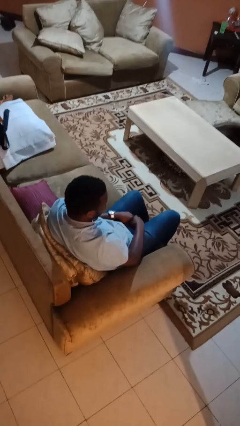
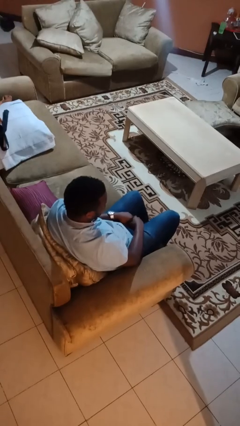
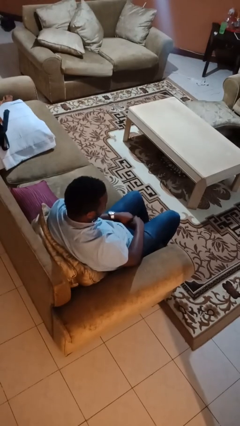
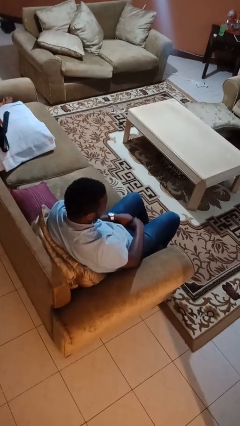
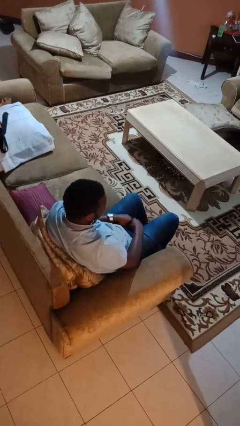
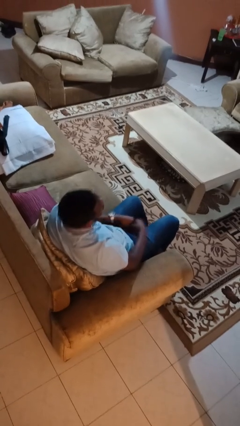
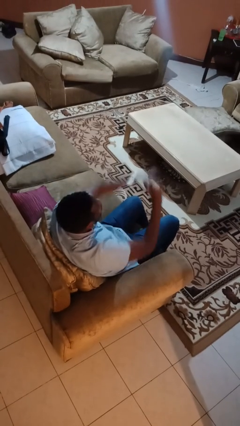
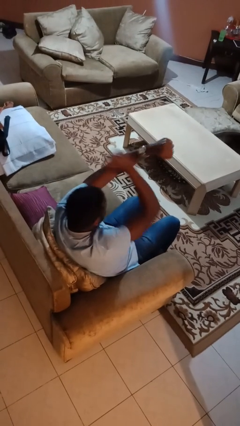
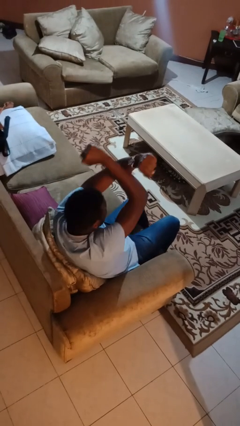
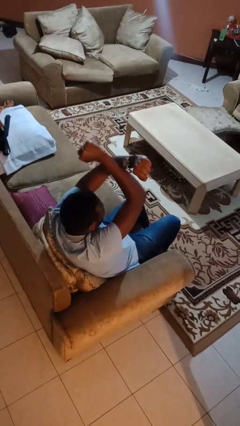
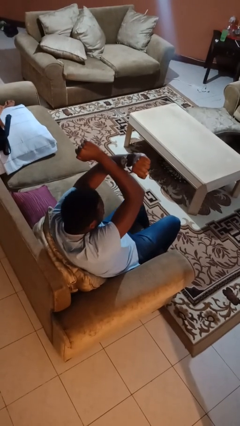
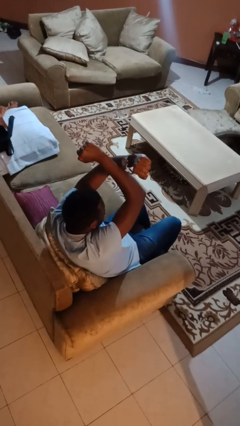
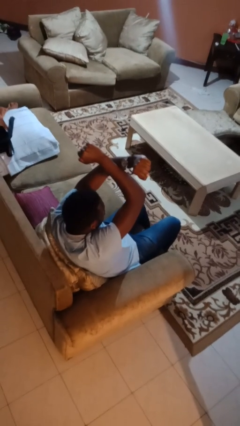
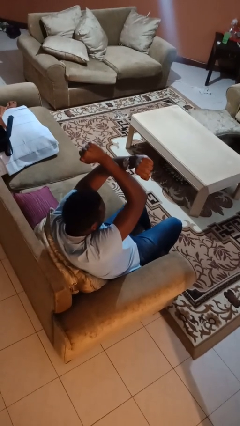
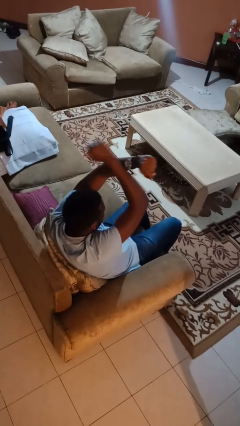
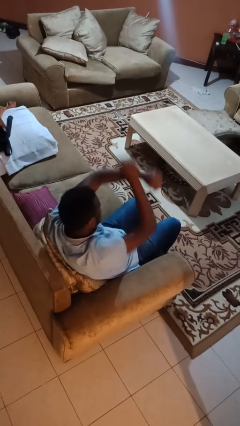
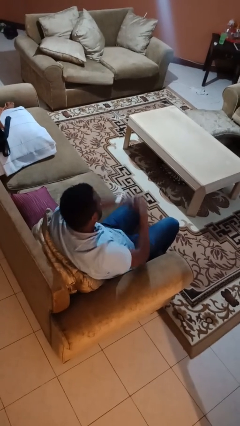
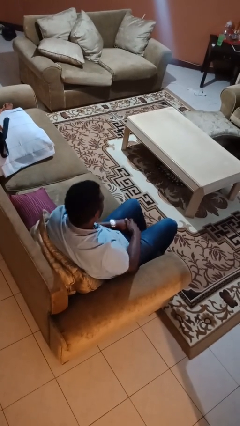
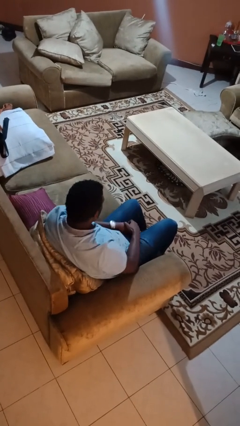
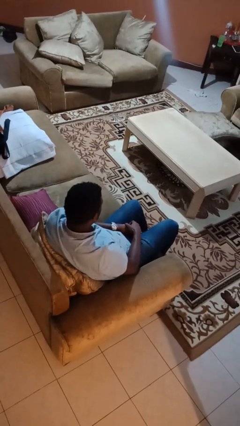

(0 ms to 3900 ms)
person gestures arms x

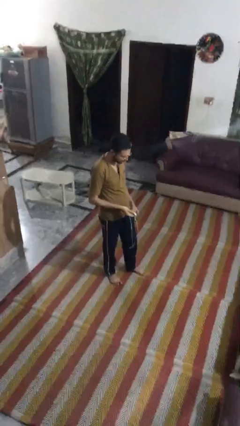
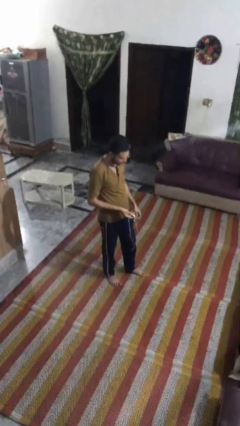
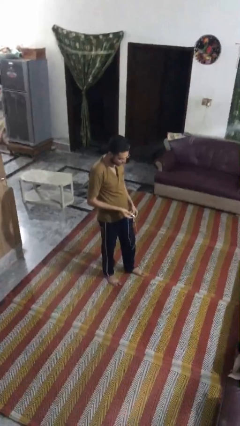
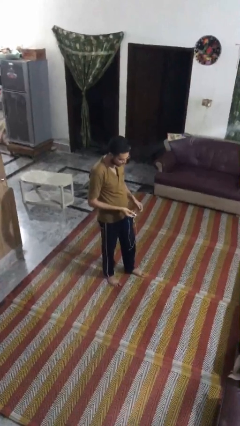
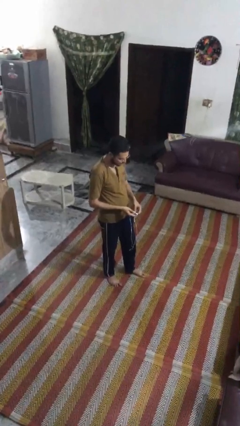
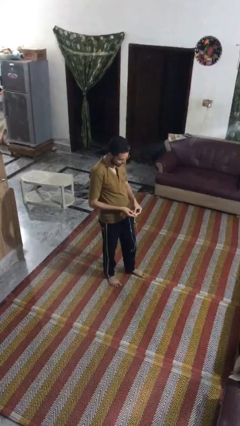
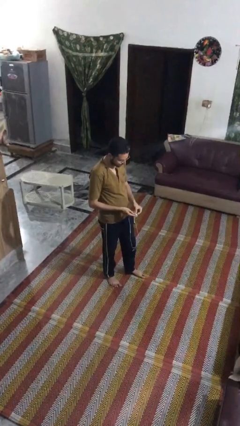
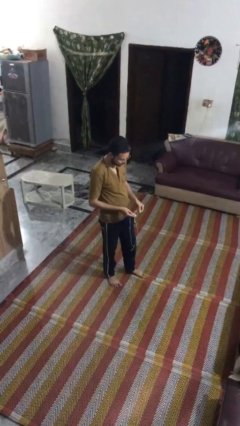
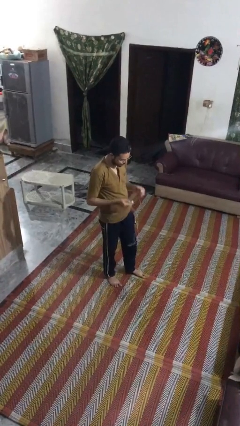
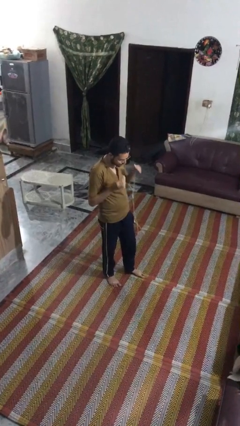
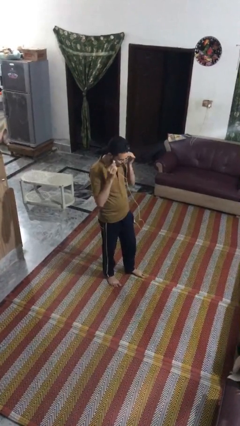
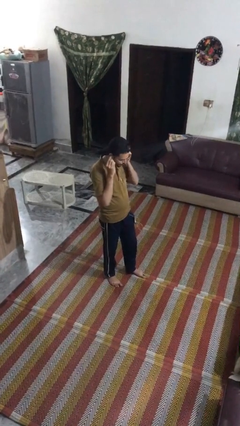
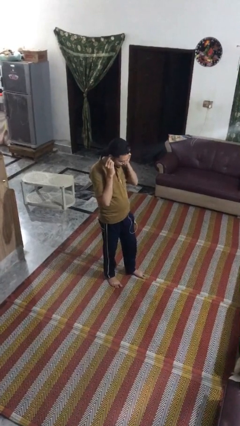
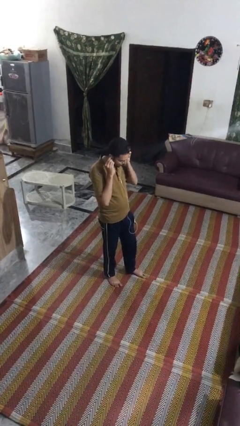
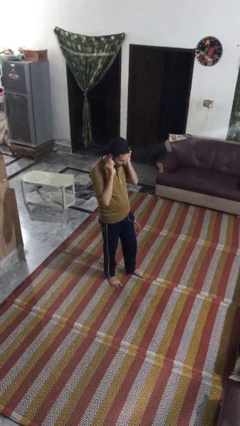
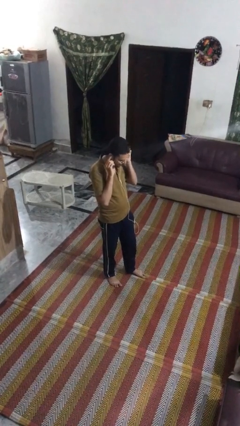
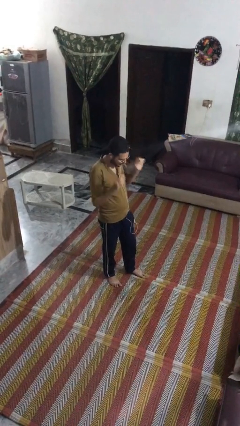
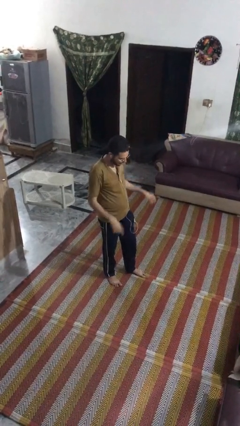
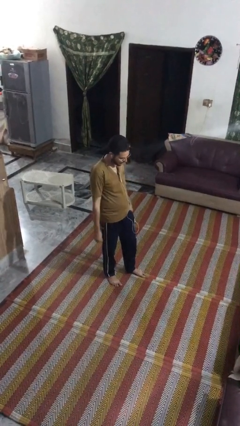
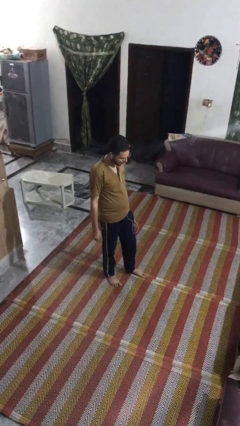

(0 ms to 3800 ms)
person puts on headphones

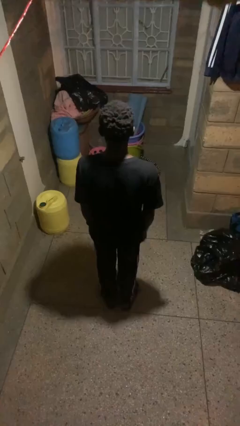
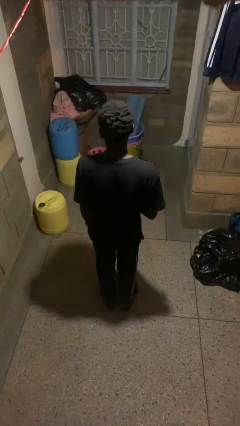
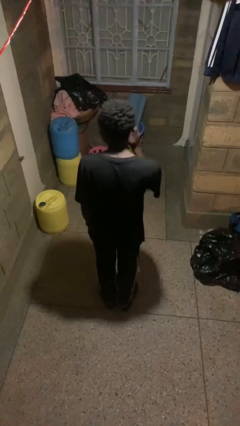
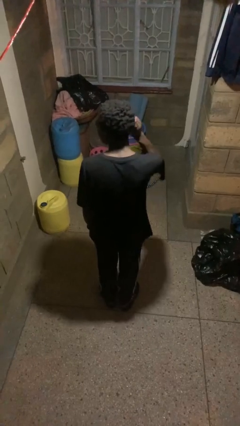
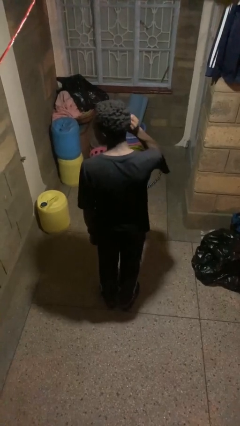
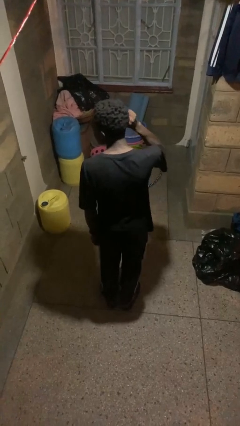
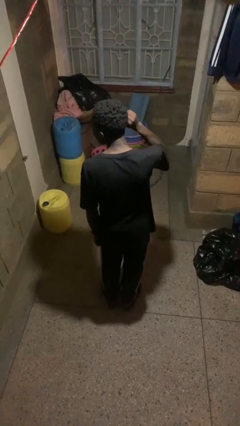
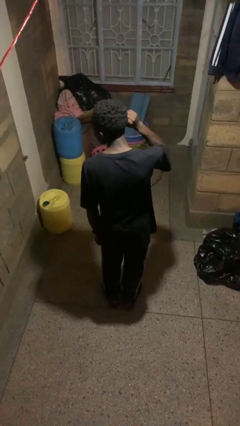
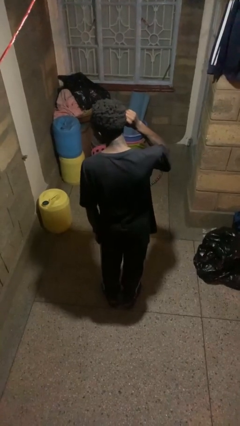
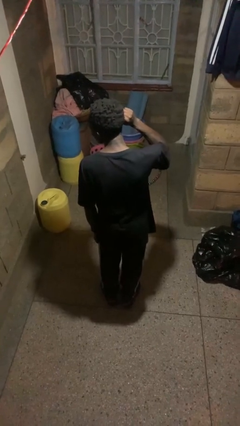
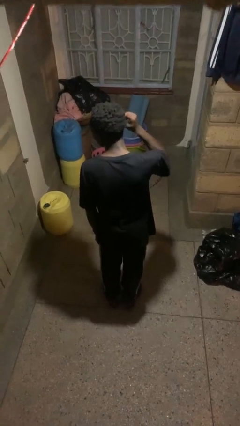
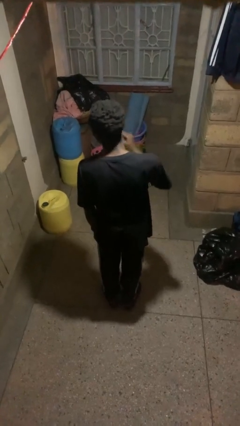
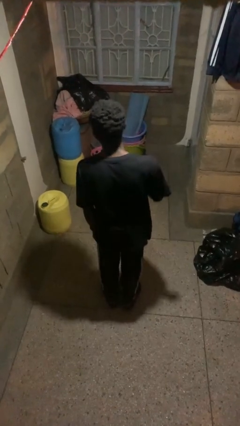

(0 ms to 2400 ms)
person touches earlobe

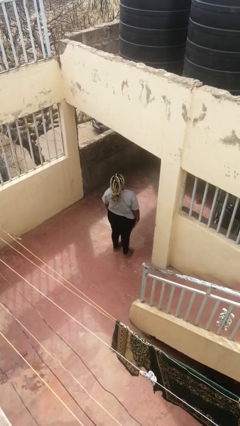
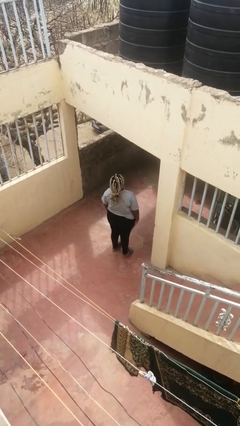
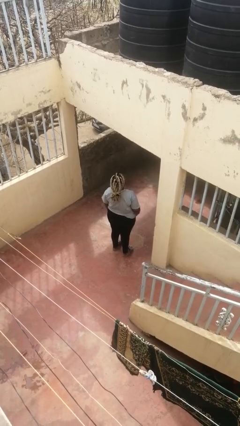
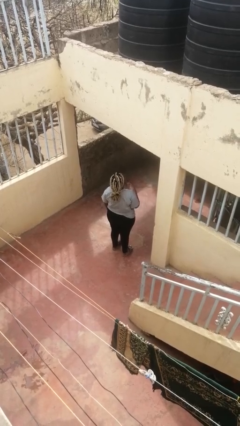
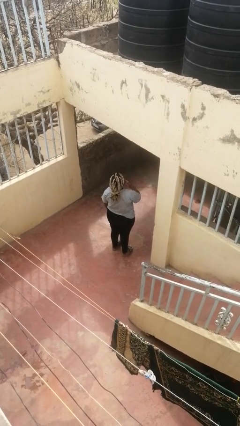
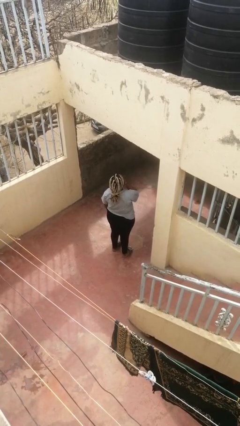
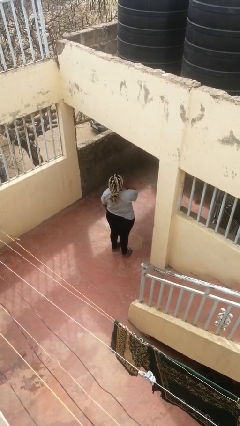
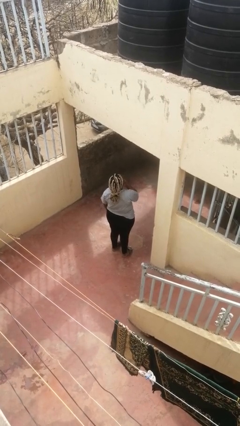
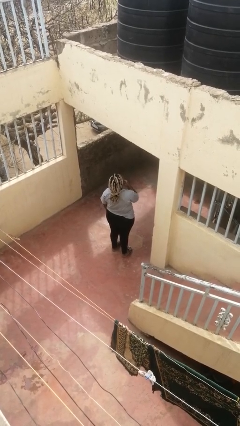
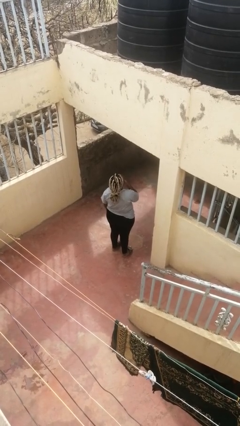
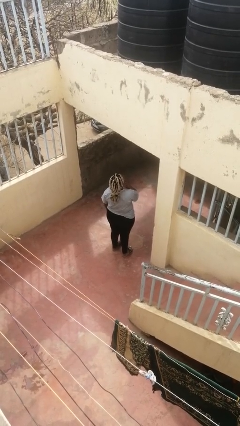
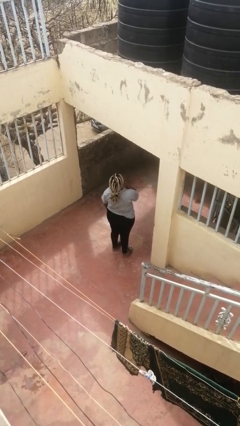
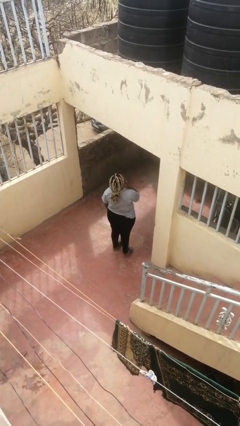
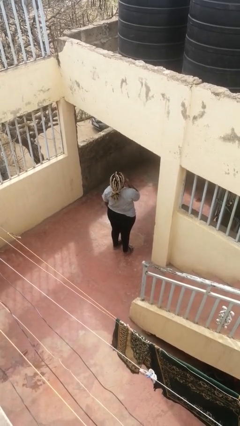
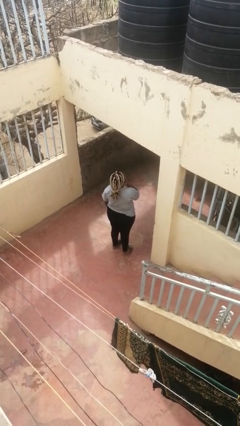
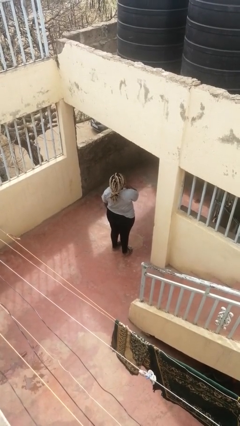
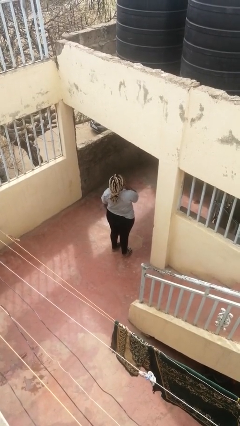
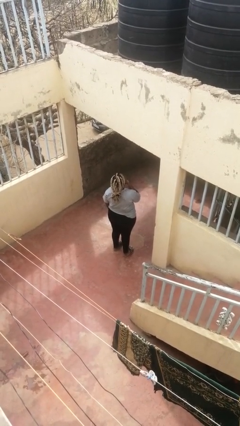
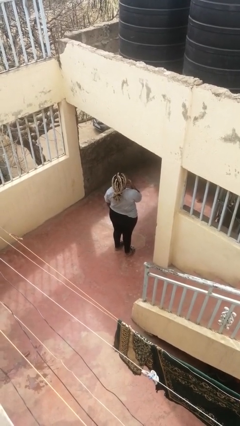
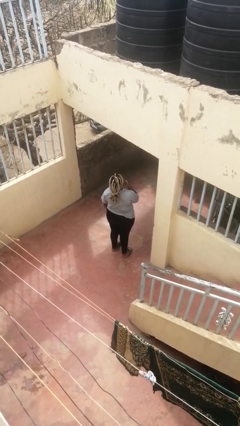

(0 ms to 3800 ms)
person strokes chin

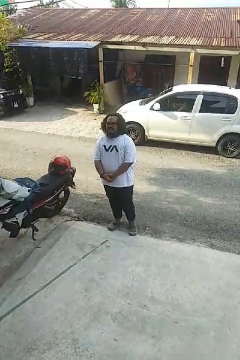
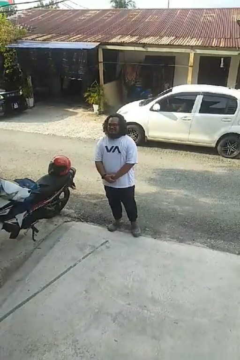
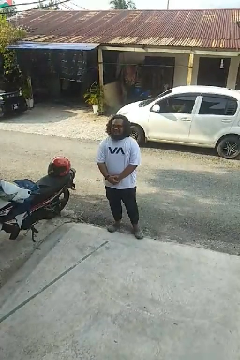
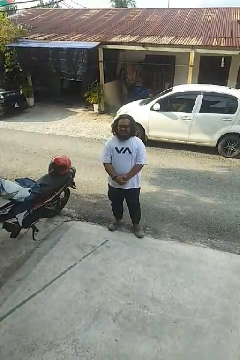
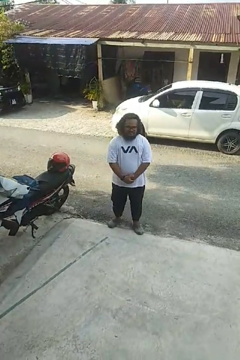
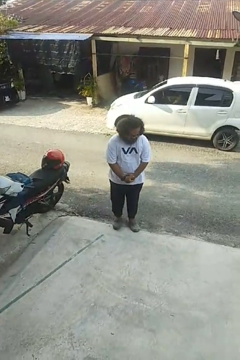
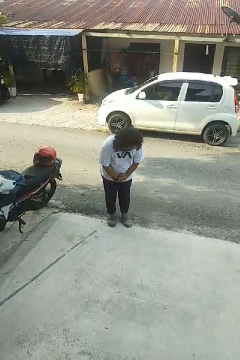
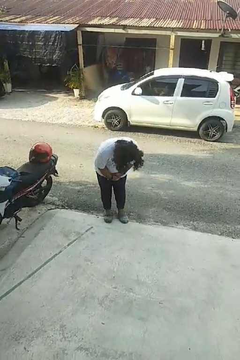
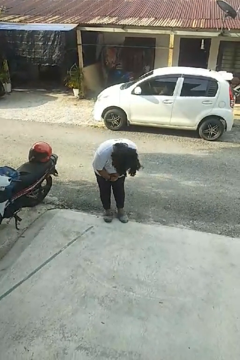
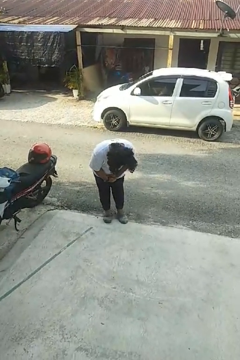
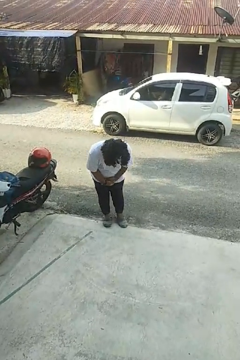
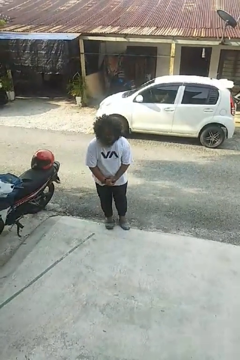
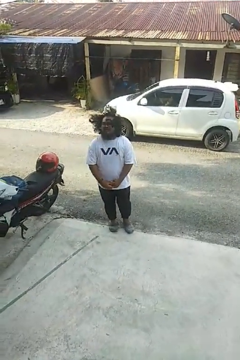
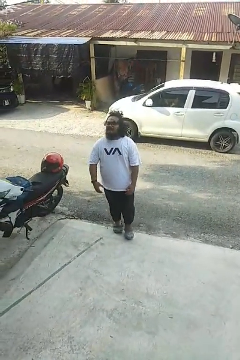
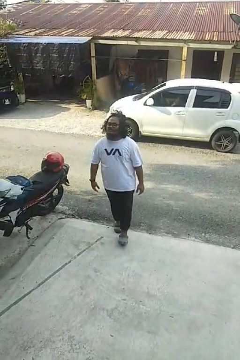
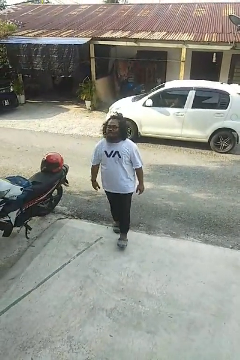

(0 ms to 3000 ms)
person bows

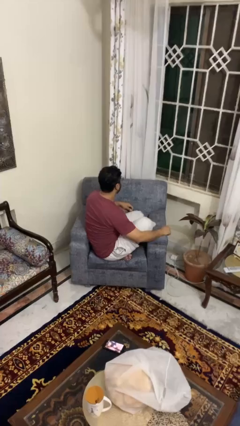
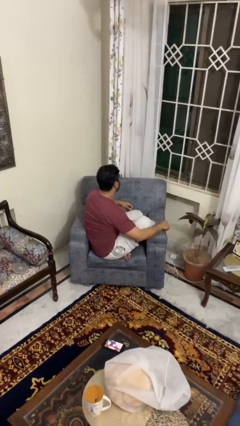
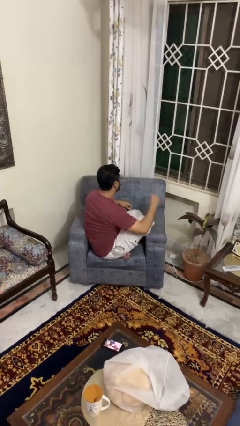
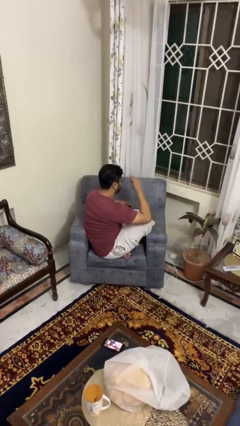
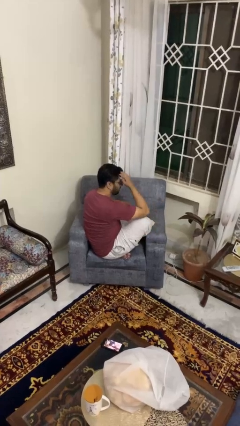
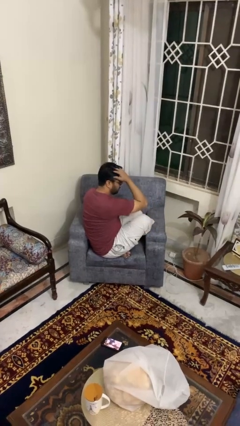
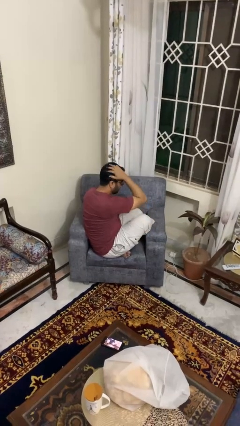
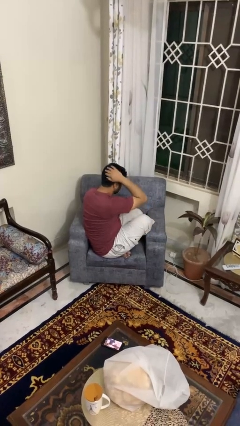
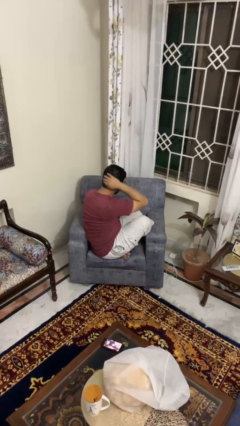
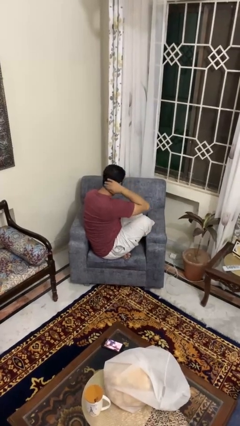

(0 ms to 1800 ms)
person strokes hair
